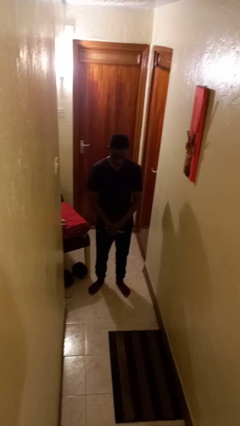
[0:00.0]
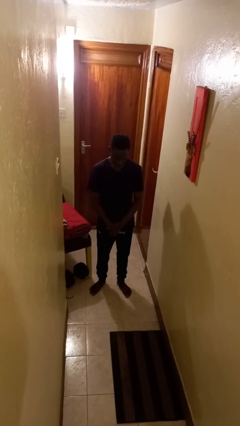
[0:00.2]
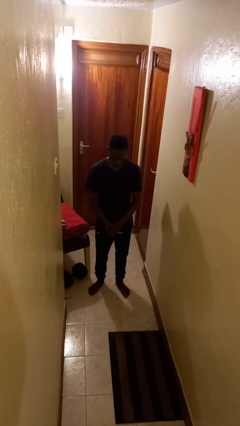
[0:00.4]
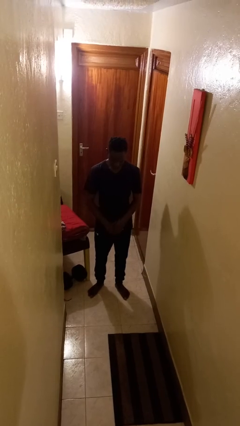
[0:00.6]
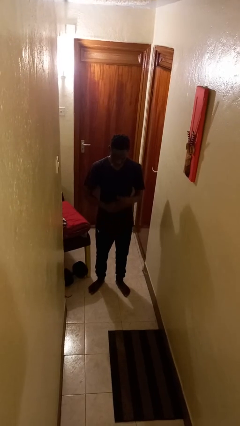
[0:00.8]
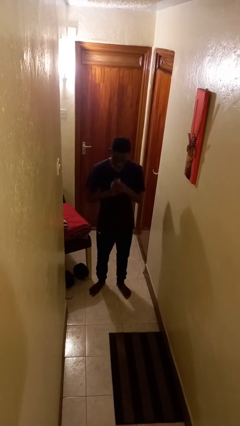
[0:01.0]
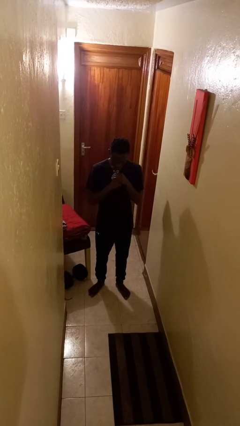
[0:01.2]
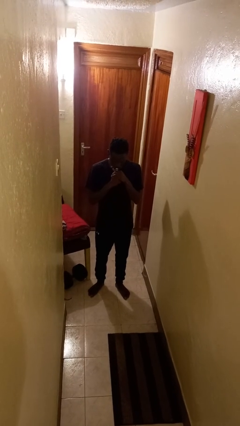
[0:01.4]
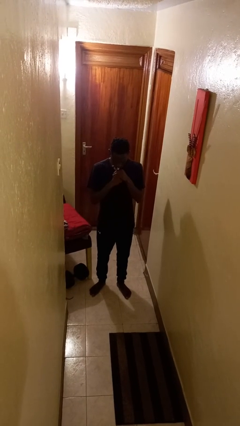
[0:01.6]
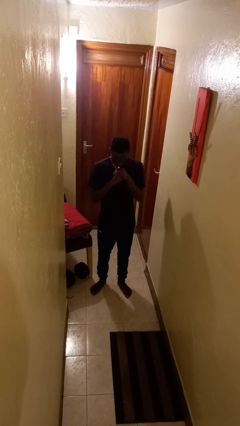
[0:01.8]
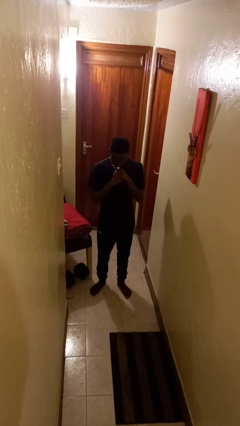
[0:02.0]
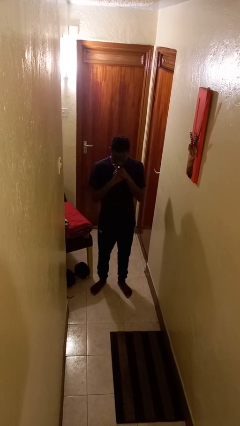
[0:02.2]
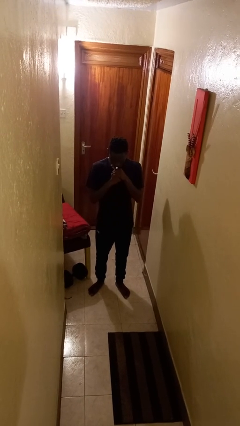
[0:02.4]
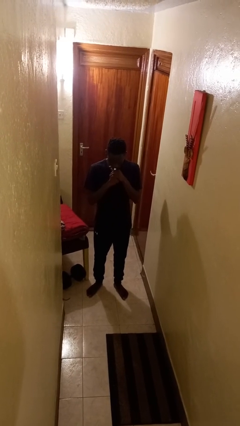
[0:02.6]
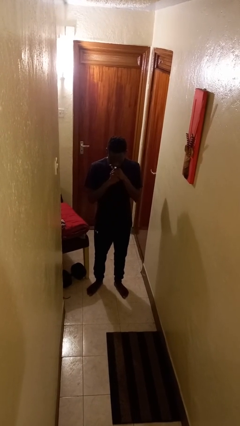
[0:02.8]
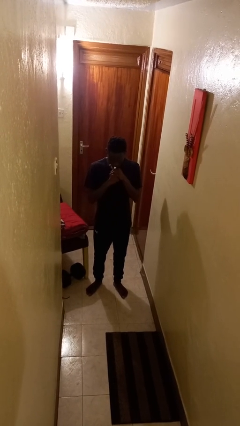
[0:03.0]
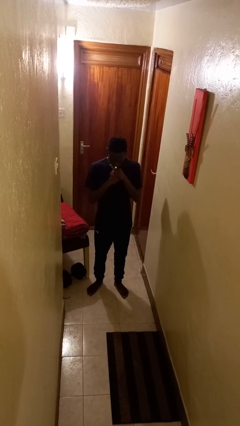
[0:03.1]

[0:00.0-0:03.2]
person vapes

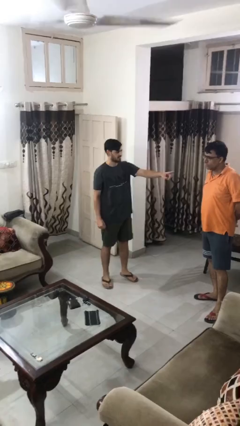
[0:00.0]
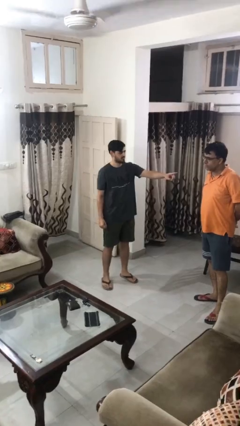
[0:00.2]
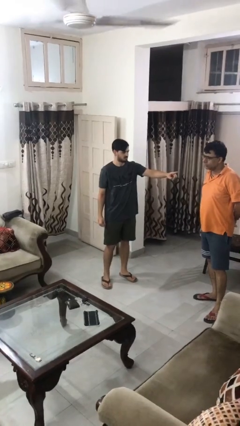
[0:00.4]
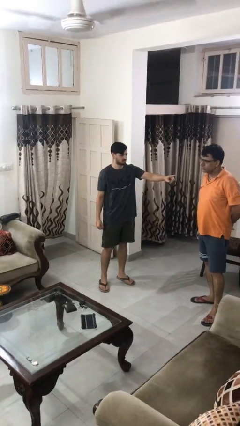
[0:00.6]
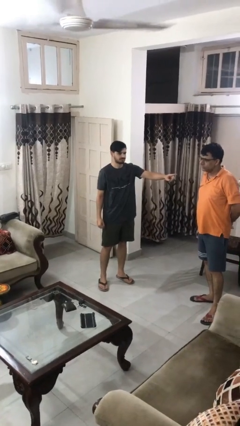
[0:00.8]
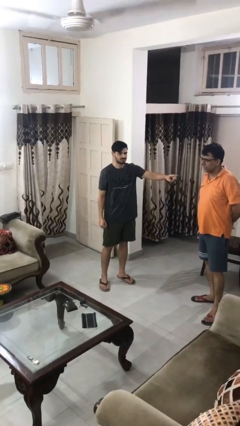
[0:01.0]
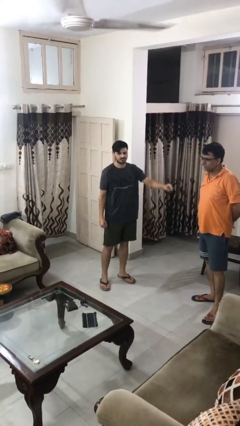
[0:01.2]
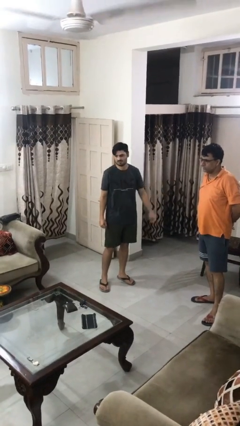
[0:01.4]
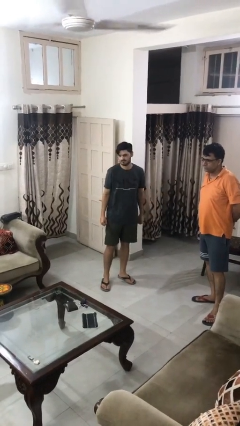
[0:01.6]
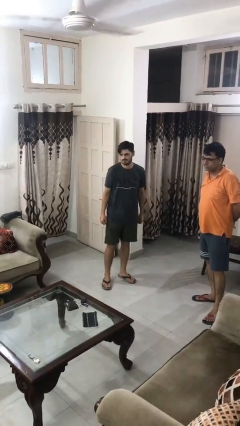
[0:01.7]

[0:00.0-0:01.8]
person points at person

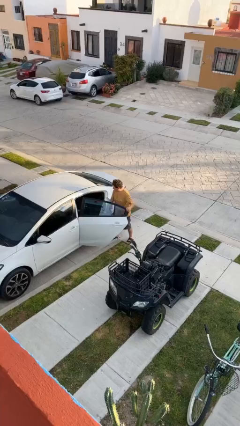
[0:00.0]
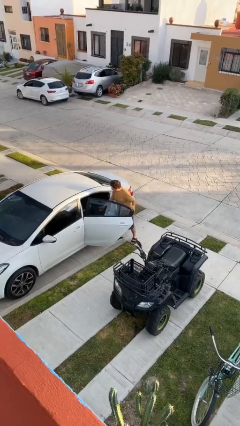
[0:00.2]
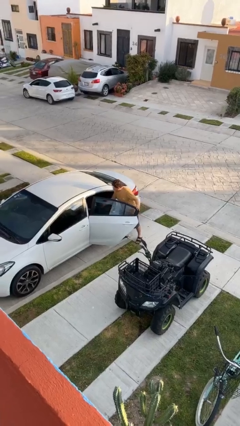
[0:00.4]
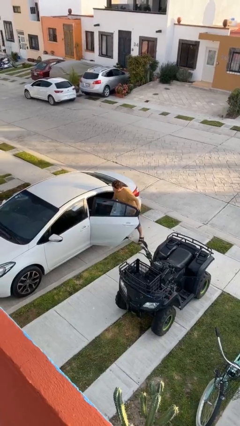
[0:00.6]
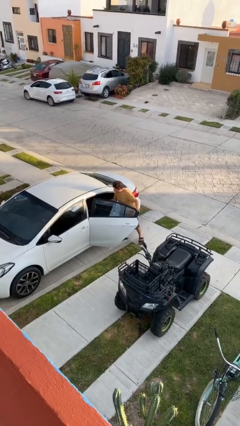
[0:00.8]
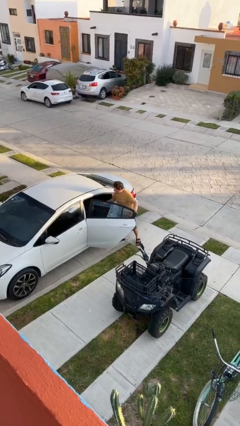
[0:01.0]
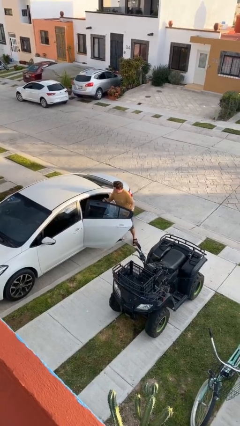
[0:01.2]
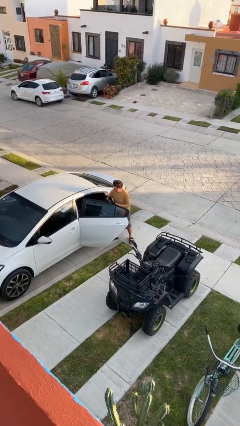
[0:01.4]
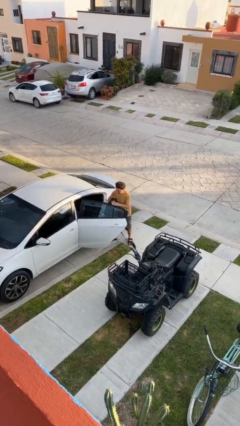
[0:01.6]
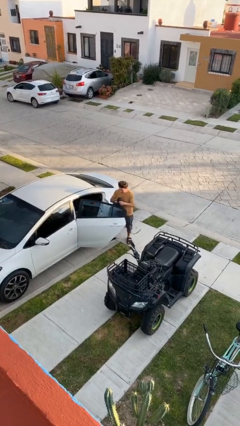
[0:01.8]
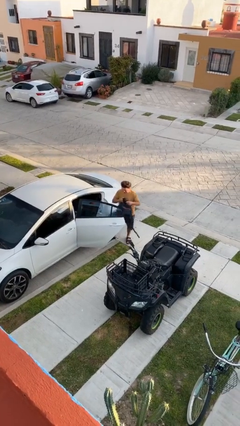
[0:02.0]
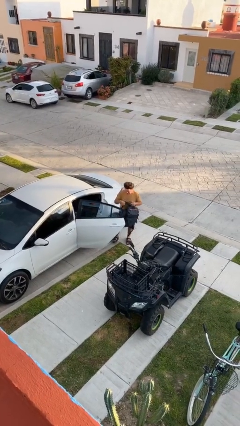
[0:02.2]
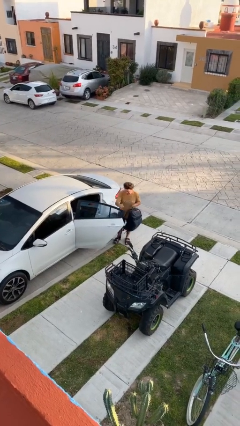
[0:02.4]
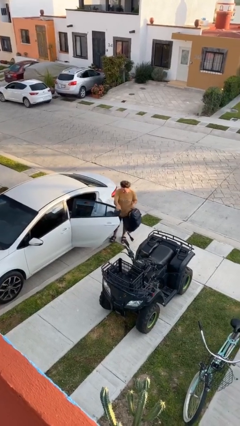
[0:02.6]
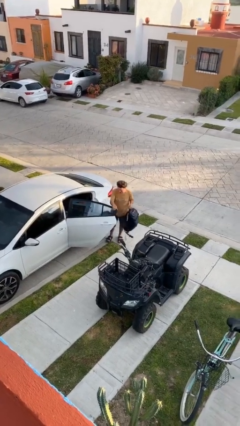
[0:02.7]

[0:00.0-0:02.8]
person unloads car

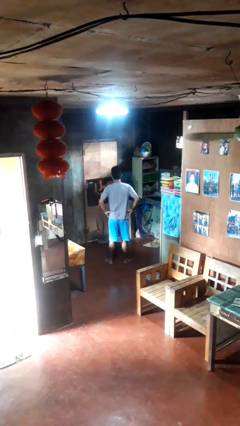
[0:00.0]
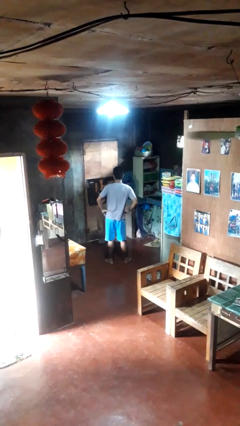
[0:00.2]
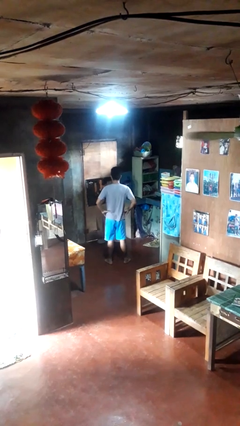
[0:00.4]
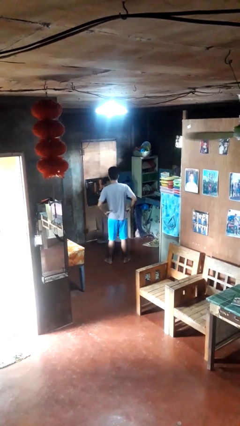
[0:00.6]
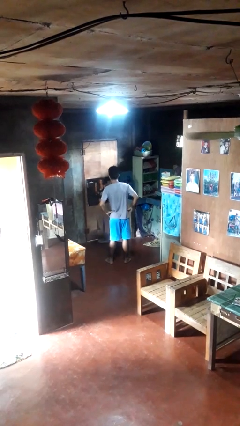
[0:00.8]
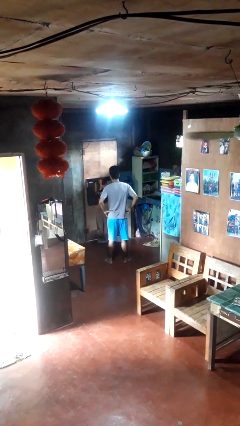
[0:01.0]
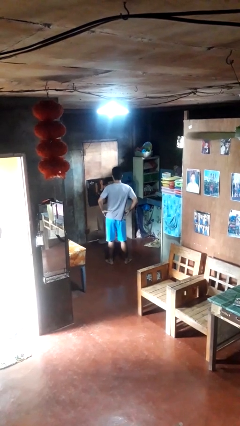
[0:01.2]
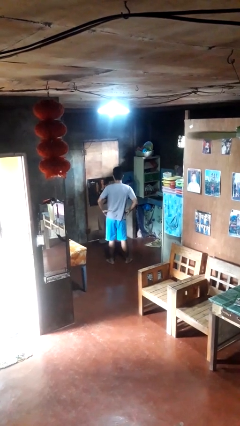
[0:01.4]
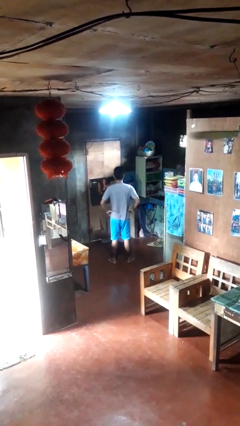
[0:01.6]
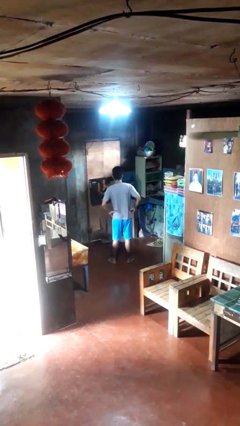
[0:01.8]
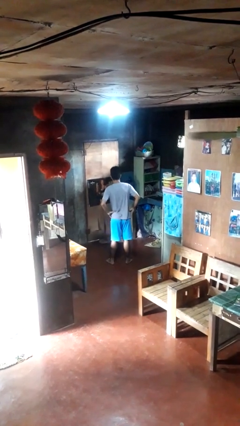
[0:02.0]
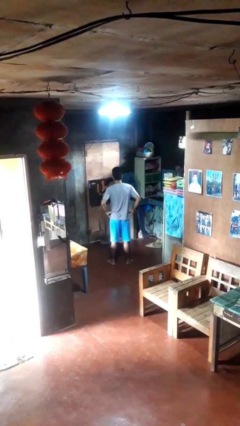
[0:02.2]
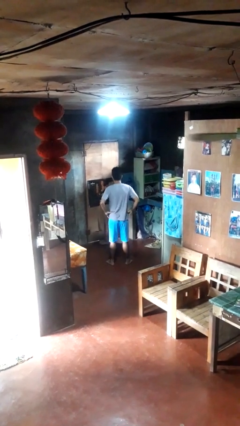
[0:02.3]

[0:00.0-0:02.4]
person wiggles hips

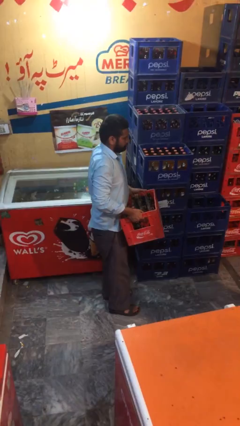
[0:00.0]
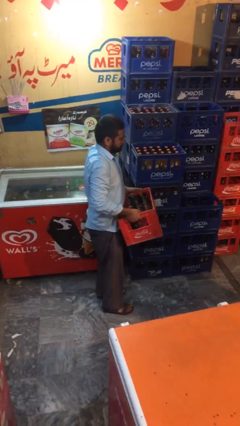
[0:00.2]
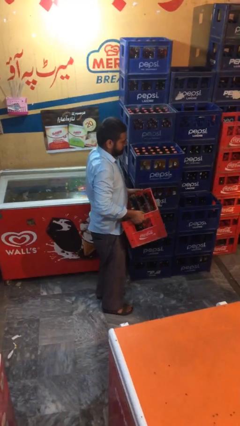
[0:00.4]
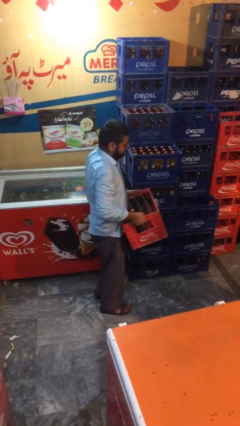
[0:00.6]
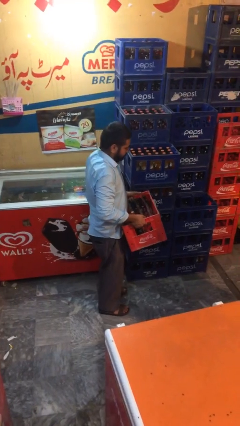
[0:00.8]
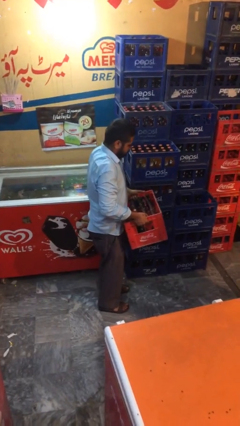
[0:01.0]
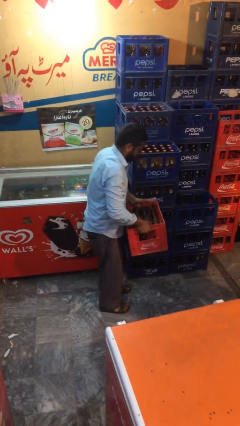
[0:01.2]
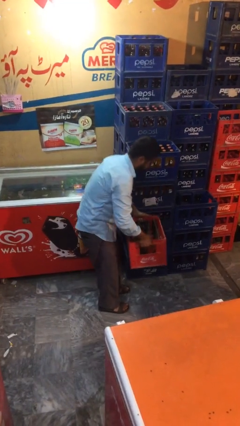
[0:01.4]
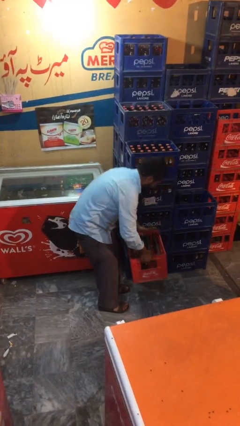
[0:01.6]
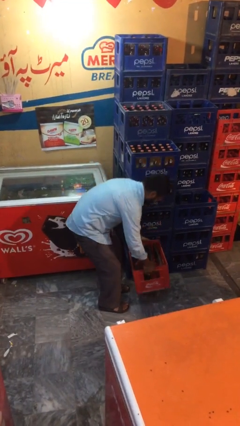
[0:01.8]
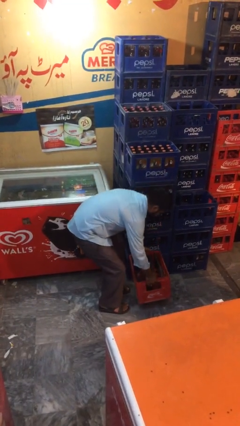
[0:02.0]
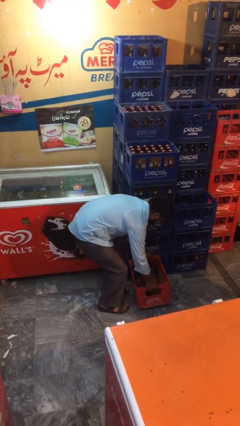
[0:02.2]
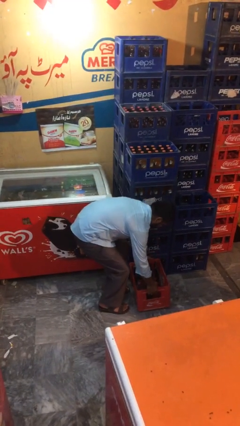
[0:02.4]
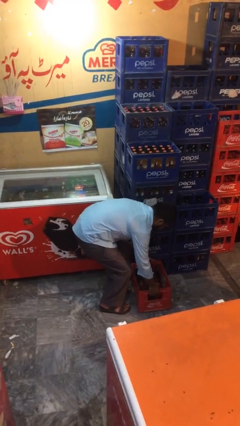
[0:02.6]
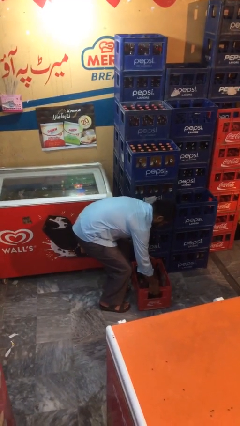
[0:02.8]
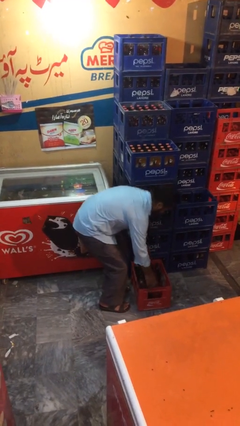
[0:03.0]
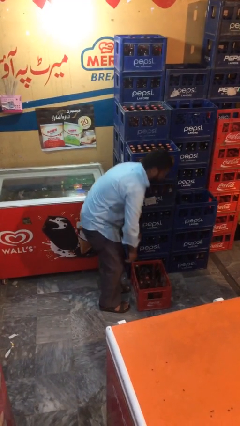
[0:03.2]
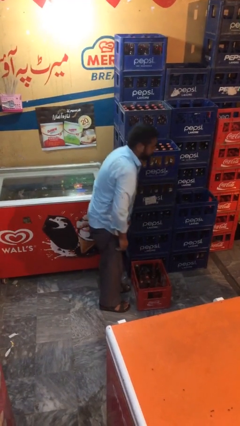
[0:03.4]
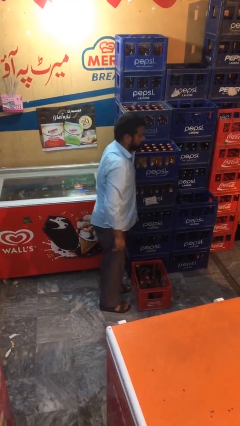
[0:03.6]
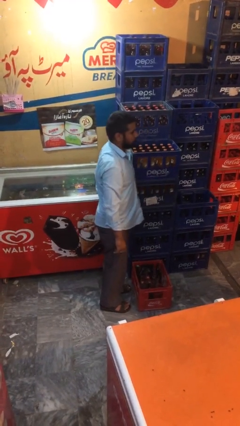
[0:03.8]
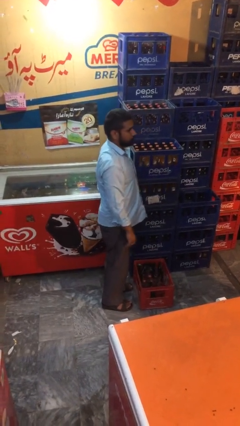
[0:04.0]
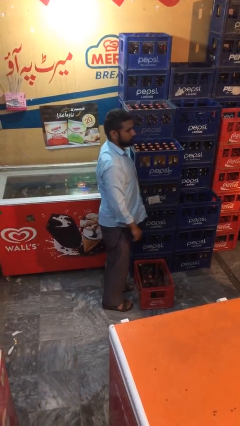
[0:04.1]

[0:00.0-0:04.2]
person puts down object on floor

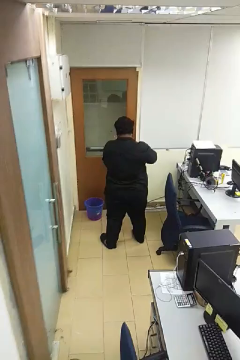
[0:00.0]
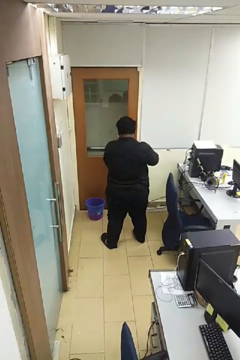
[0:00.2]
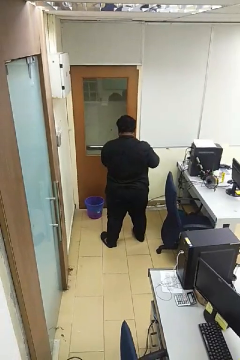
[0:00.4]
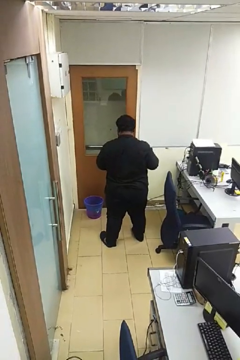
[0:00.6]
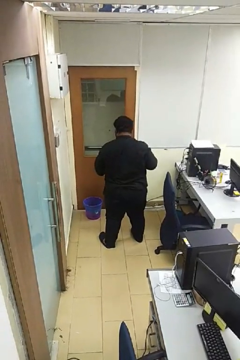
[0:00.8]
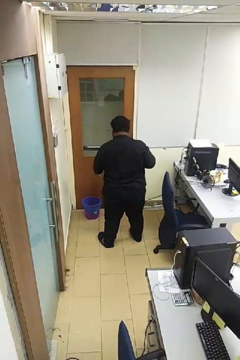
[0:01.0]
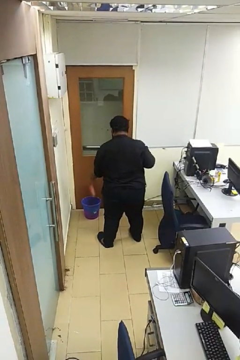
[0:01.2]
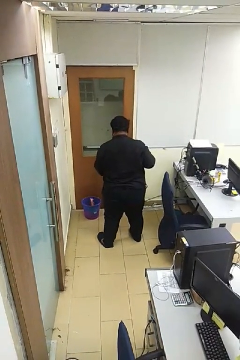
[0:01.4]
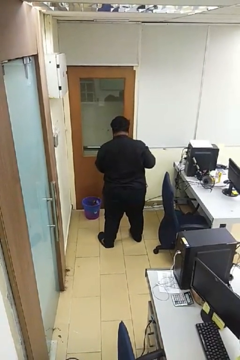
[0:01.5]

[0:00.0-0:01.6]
person discards trash

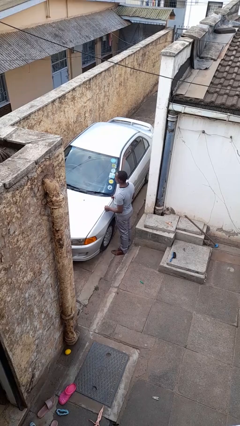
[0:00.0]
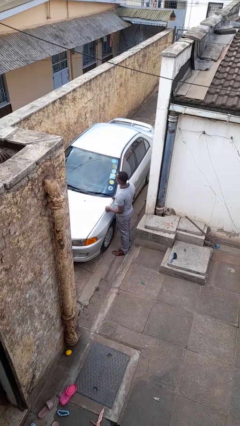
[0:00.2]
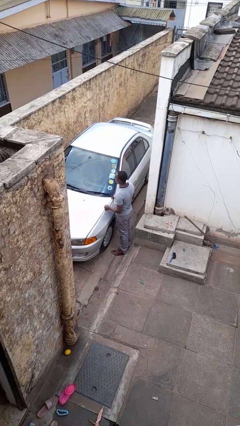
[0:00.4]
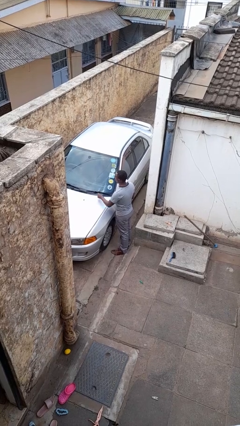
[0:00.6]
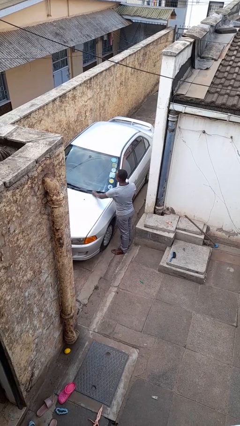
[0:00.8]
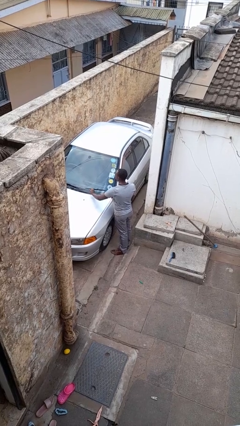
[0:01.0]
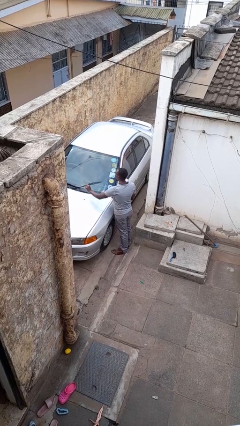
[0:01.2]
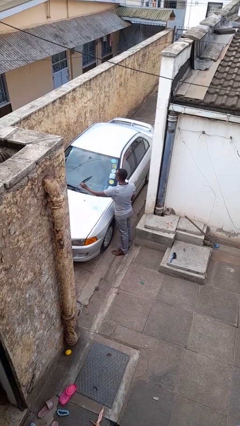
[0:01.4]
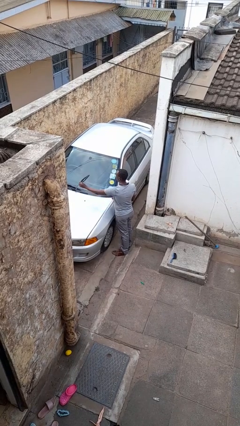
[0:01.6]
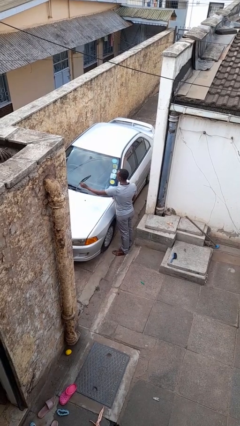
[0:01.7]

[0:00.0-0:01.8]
person flips up car wipers
